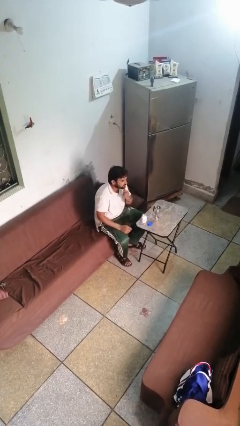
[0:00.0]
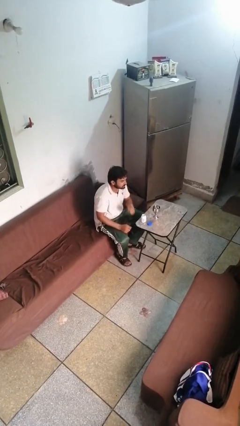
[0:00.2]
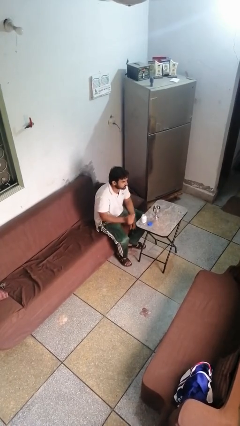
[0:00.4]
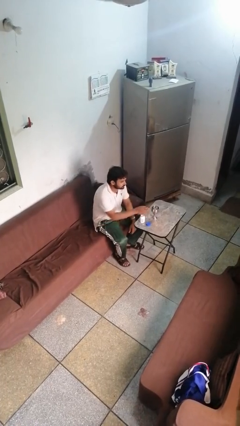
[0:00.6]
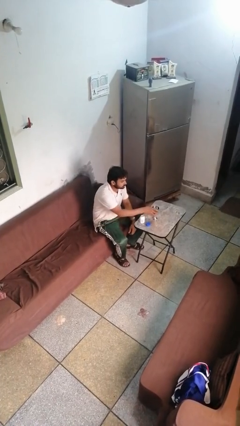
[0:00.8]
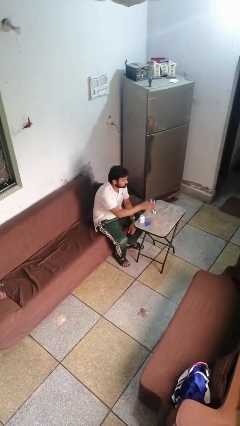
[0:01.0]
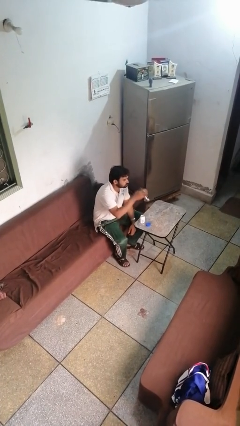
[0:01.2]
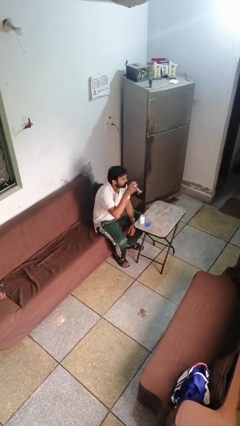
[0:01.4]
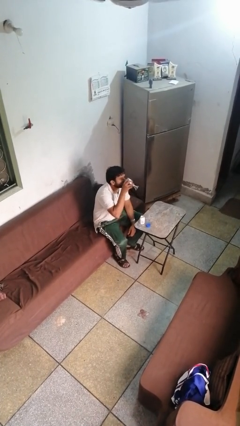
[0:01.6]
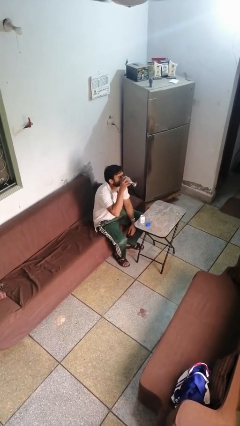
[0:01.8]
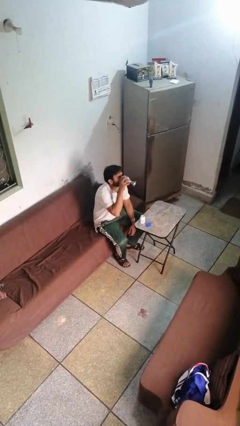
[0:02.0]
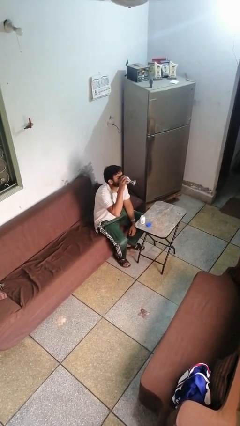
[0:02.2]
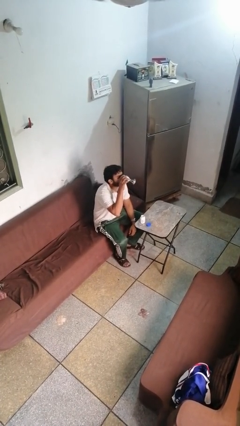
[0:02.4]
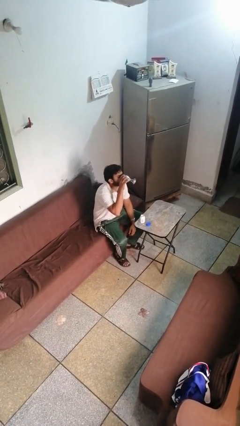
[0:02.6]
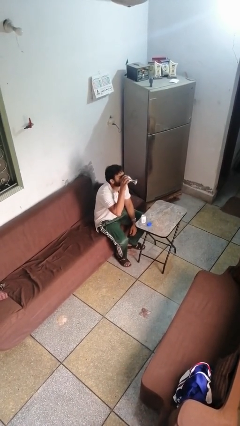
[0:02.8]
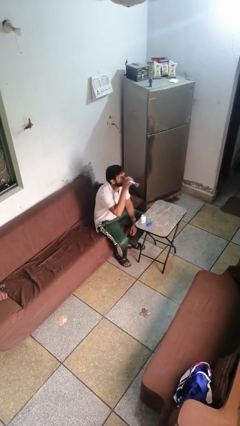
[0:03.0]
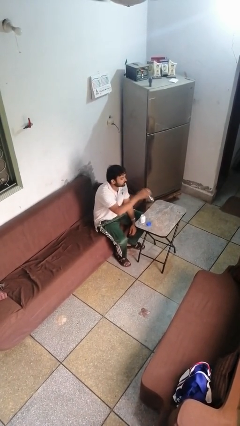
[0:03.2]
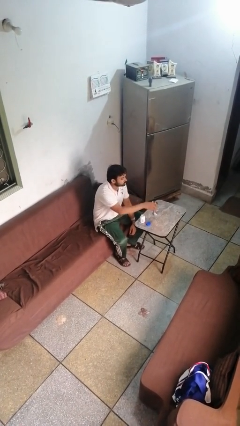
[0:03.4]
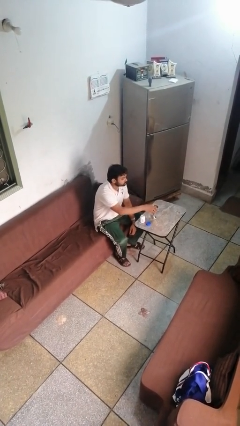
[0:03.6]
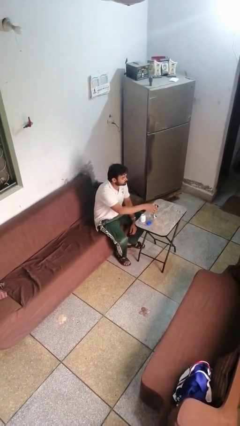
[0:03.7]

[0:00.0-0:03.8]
person drinks from cup

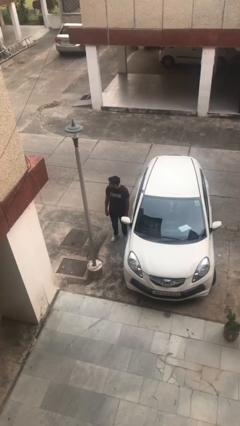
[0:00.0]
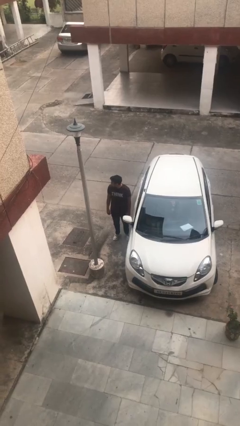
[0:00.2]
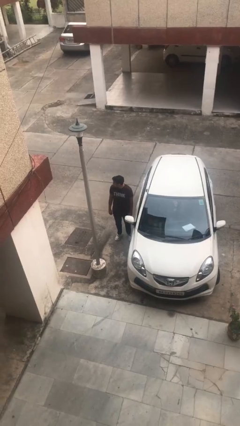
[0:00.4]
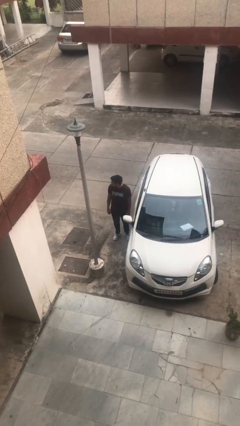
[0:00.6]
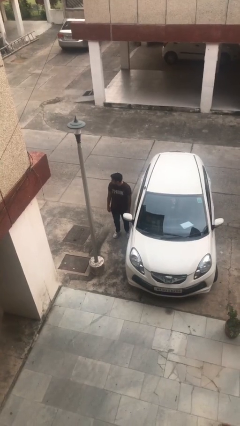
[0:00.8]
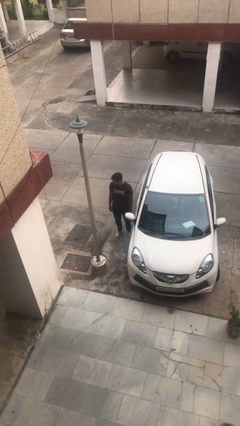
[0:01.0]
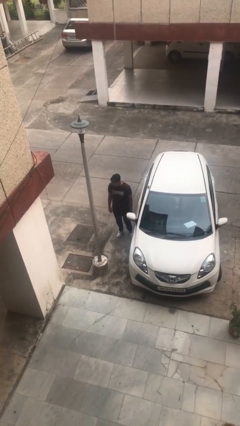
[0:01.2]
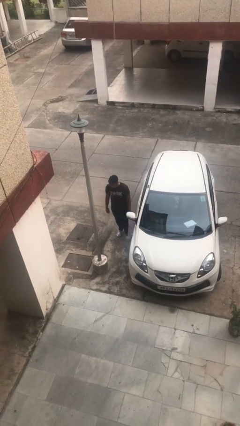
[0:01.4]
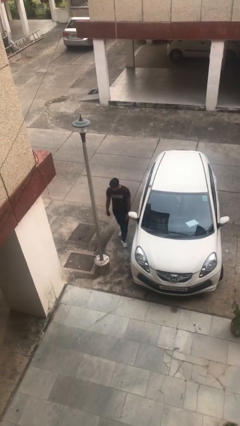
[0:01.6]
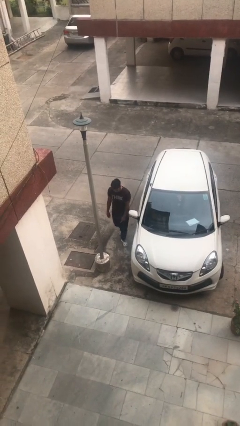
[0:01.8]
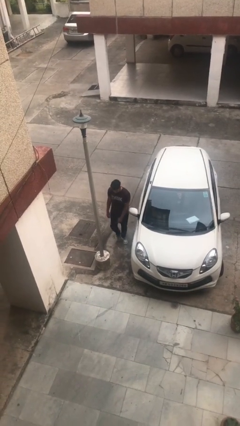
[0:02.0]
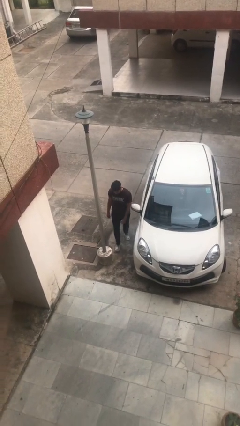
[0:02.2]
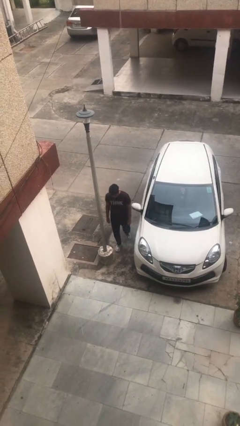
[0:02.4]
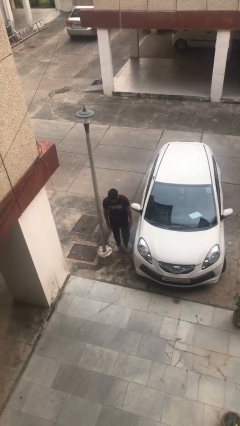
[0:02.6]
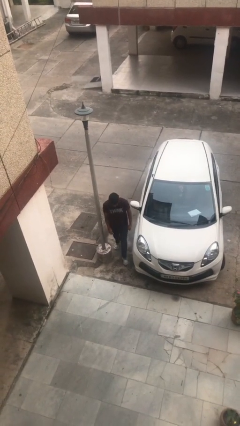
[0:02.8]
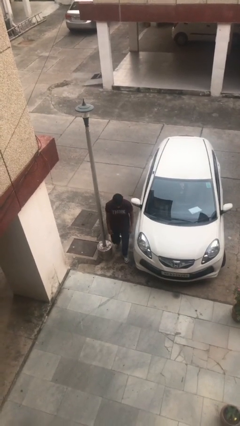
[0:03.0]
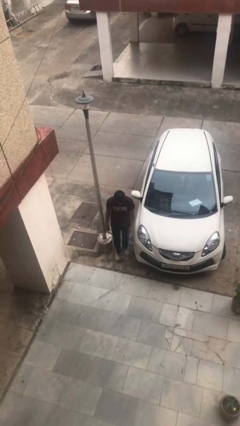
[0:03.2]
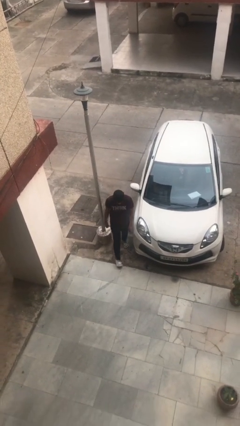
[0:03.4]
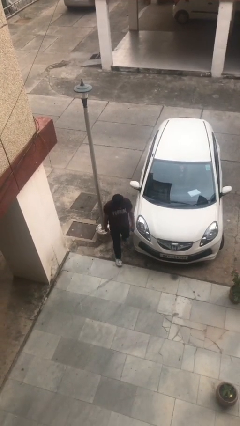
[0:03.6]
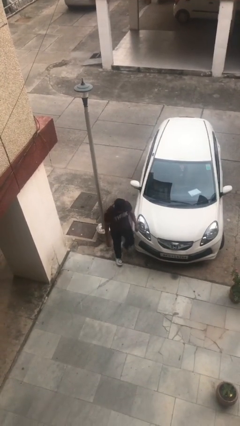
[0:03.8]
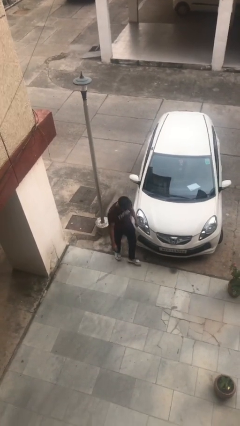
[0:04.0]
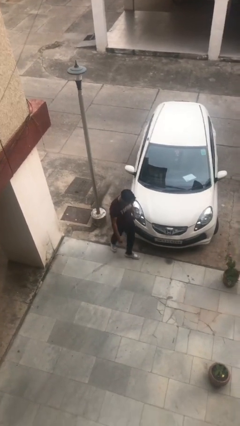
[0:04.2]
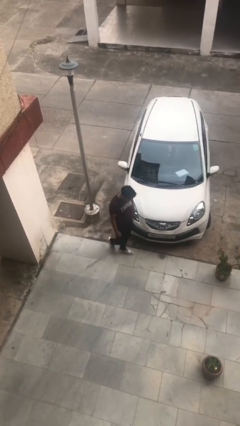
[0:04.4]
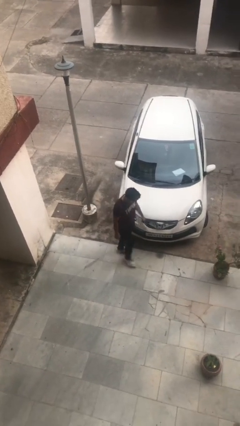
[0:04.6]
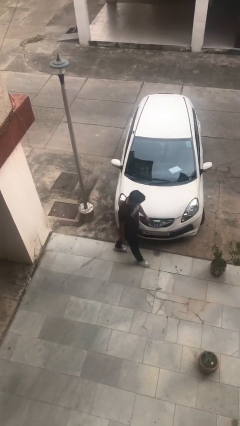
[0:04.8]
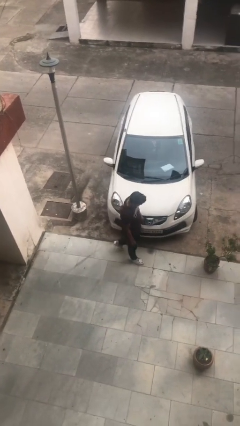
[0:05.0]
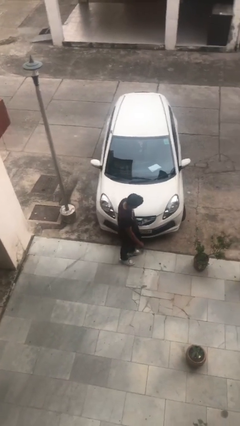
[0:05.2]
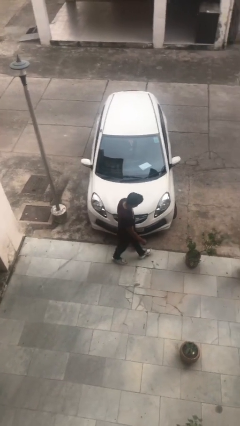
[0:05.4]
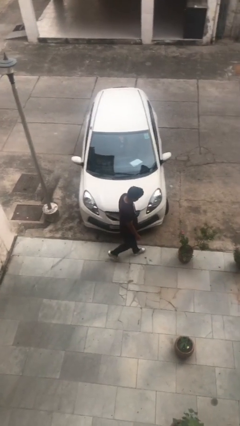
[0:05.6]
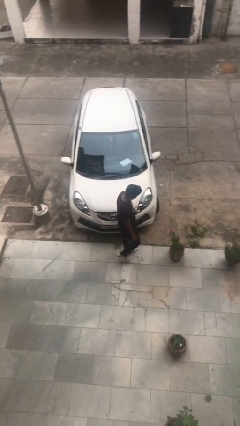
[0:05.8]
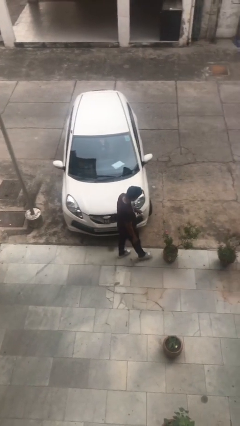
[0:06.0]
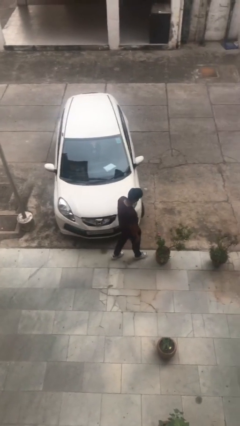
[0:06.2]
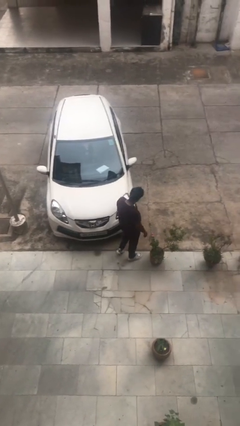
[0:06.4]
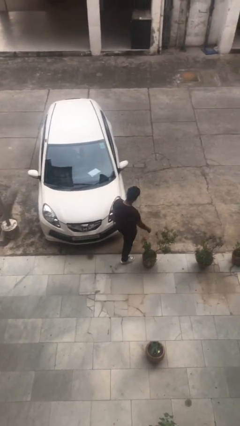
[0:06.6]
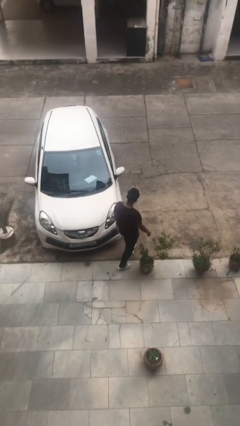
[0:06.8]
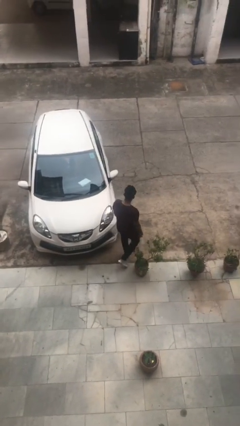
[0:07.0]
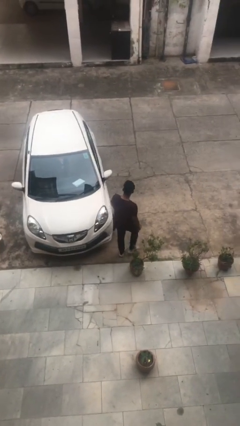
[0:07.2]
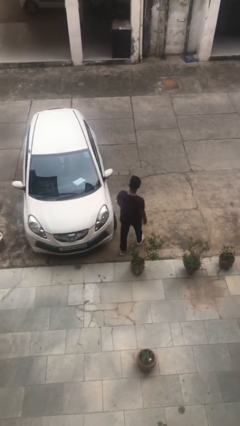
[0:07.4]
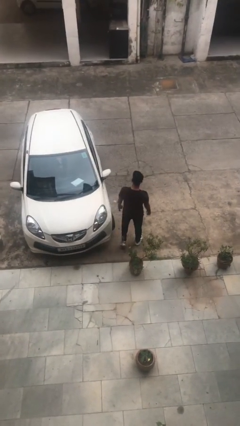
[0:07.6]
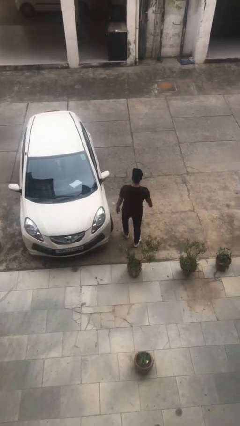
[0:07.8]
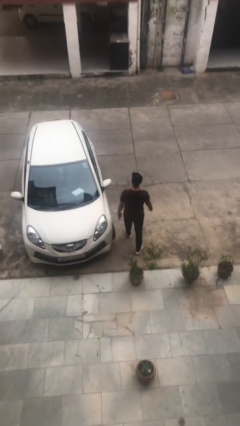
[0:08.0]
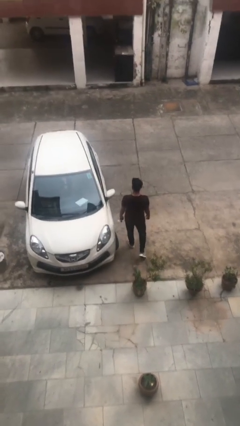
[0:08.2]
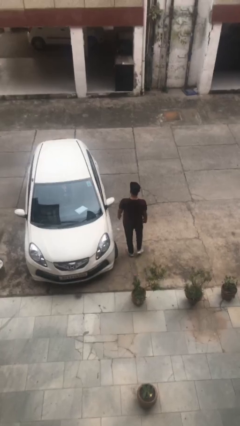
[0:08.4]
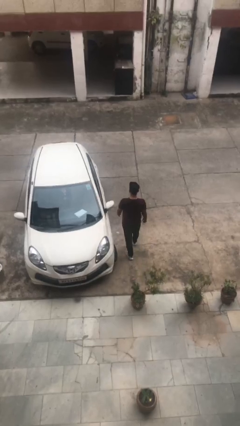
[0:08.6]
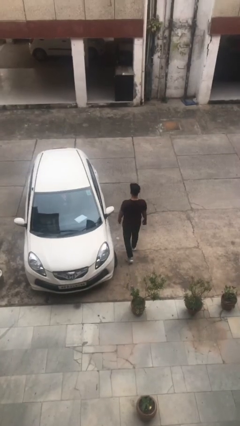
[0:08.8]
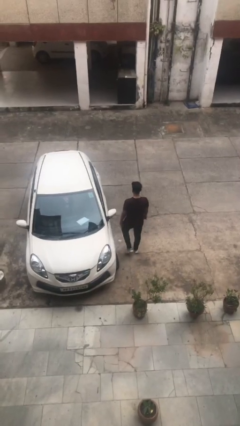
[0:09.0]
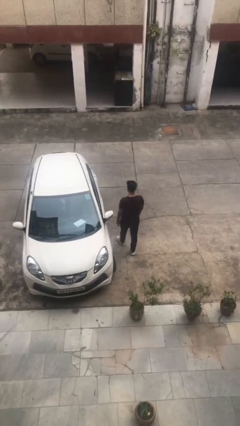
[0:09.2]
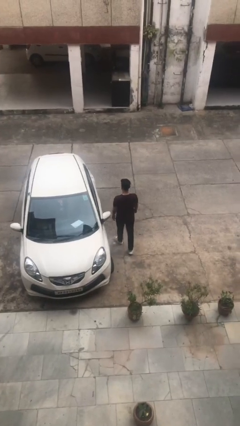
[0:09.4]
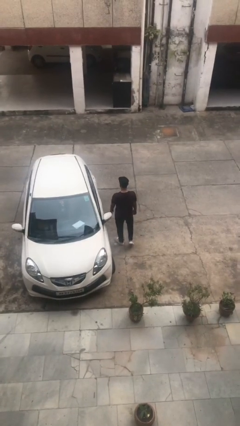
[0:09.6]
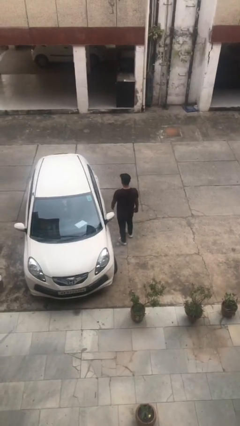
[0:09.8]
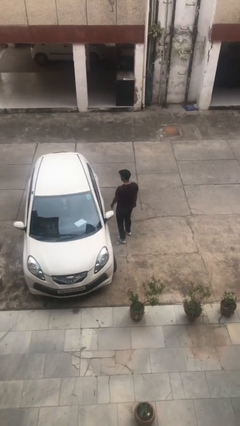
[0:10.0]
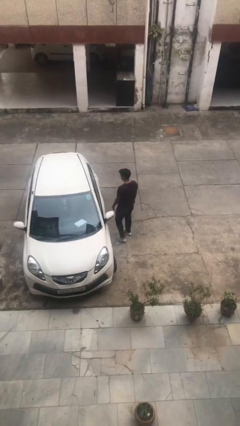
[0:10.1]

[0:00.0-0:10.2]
person walks around car

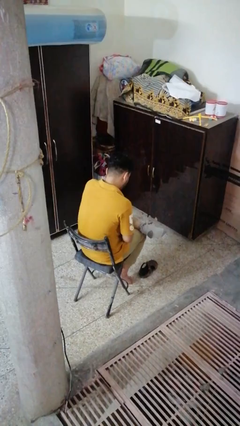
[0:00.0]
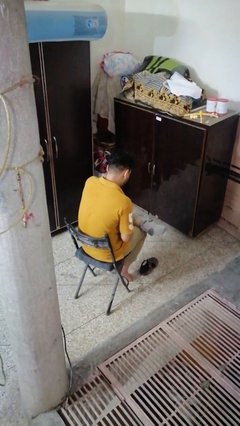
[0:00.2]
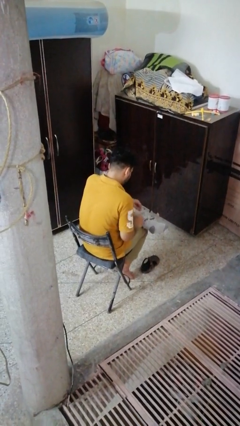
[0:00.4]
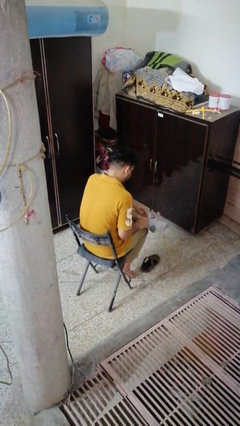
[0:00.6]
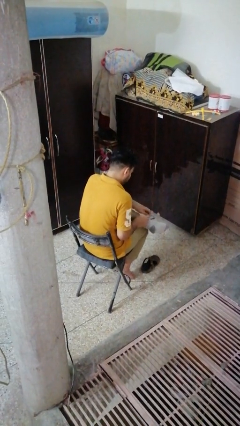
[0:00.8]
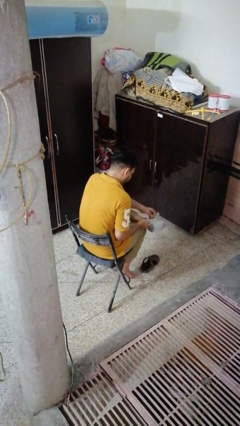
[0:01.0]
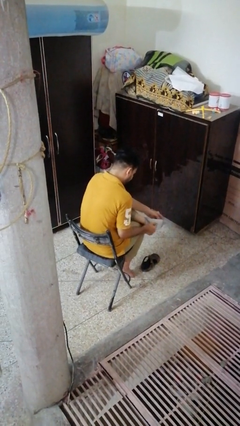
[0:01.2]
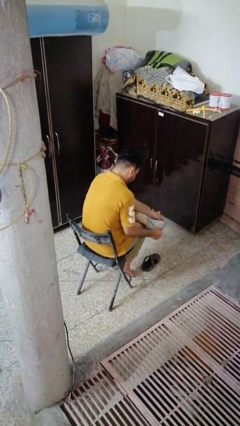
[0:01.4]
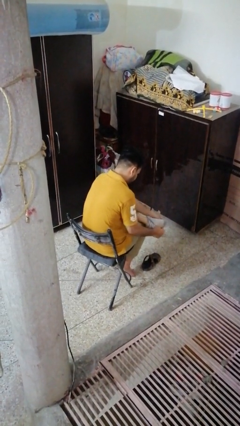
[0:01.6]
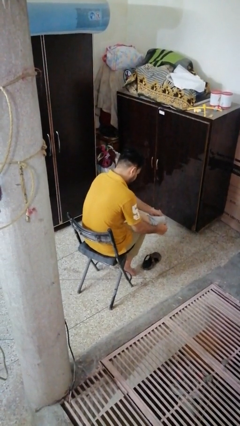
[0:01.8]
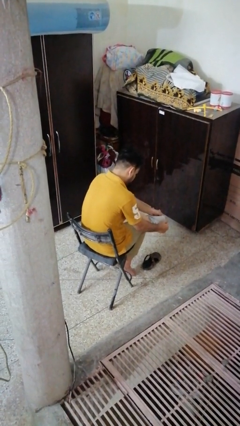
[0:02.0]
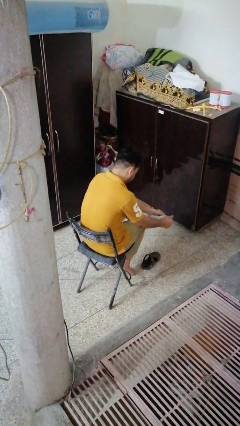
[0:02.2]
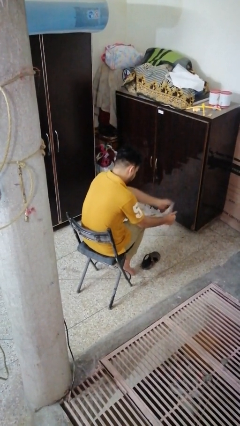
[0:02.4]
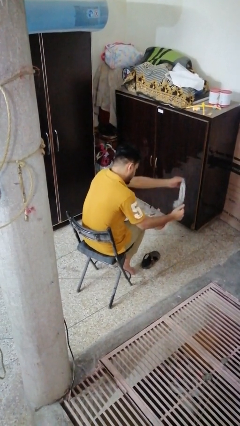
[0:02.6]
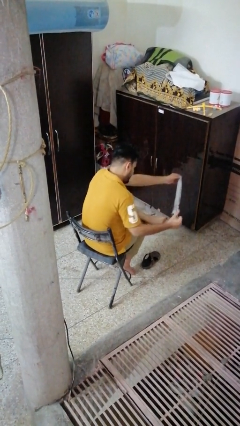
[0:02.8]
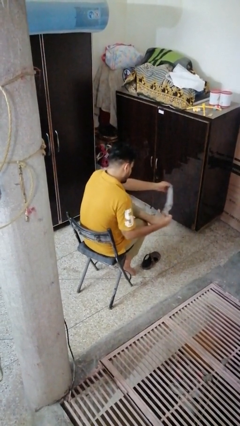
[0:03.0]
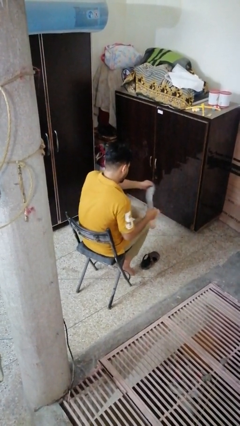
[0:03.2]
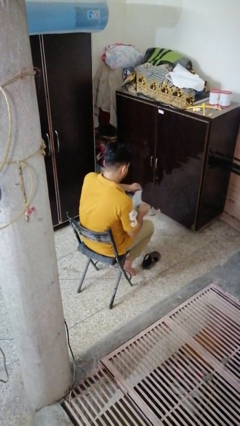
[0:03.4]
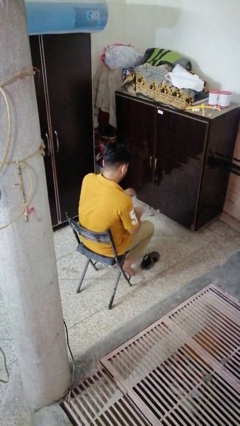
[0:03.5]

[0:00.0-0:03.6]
person takes off socks

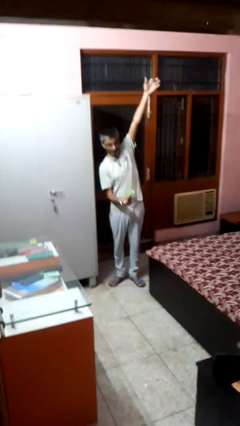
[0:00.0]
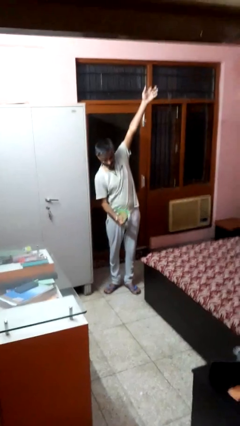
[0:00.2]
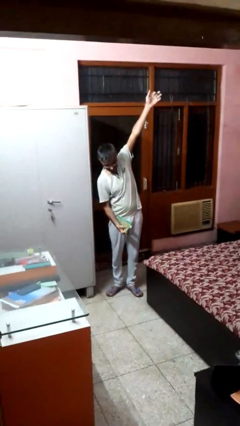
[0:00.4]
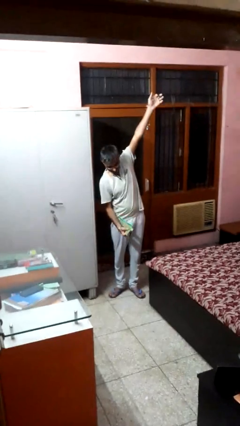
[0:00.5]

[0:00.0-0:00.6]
person catches dropped object
